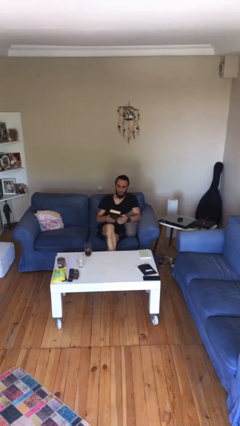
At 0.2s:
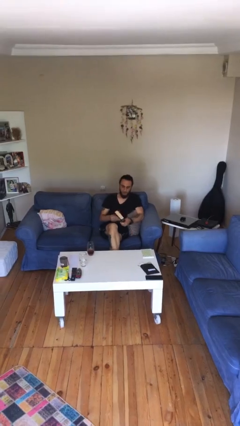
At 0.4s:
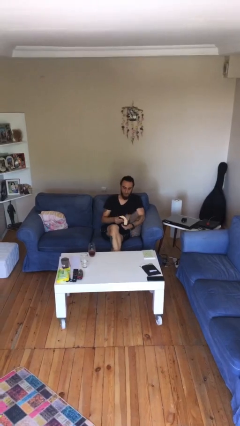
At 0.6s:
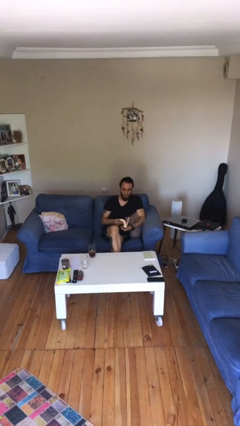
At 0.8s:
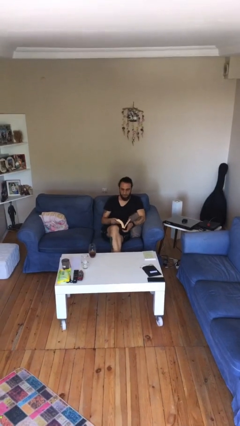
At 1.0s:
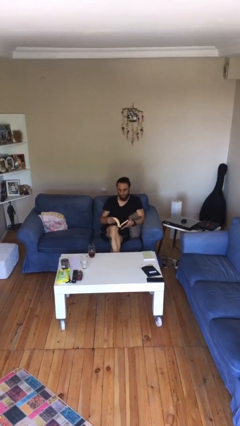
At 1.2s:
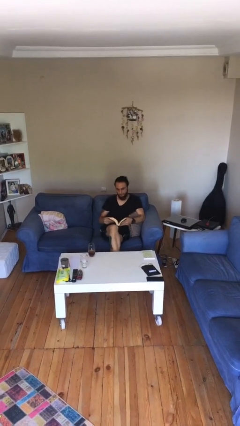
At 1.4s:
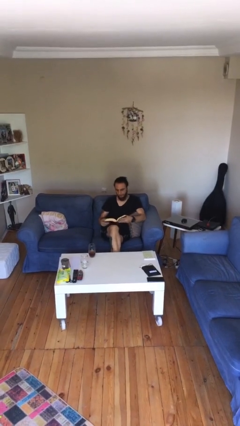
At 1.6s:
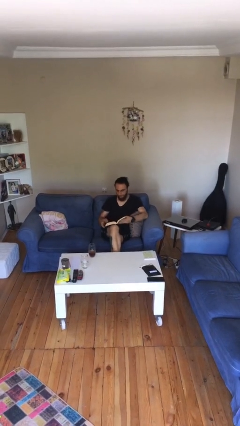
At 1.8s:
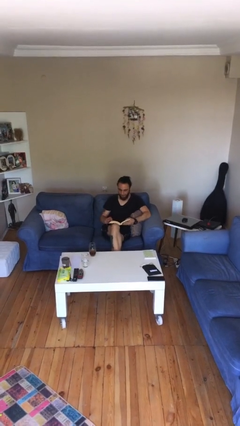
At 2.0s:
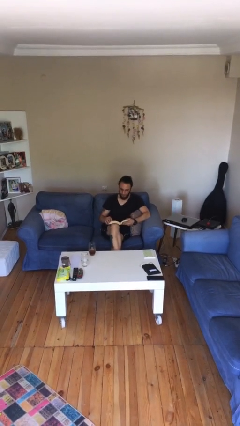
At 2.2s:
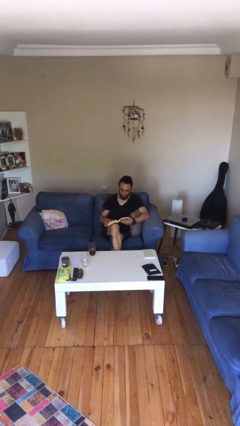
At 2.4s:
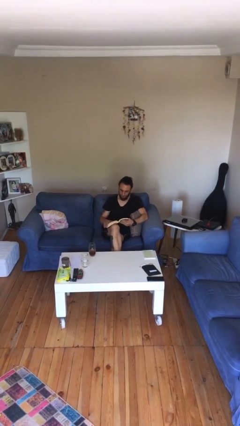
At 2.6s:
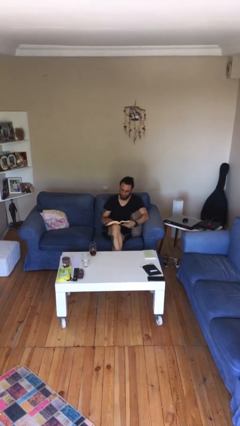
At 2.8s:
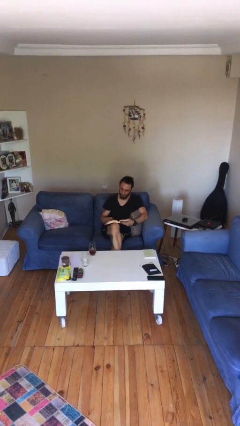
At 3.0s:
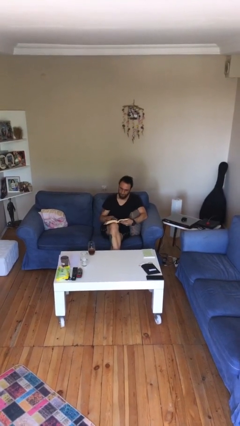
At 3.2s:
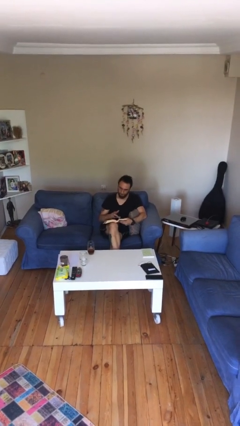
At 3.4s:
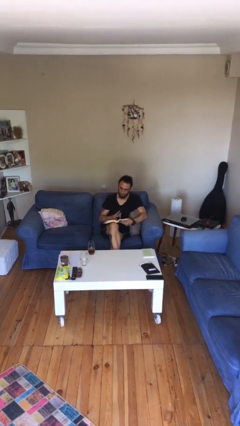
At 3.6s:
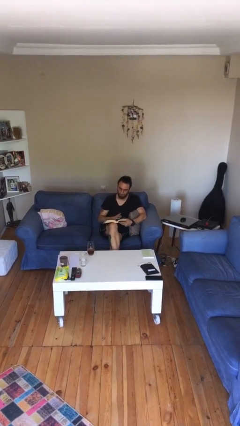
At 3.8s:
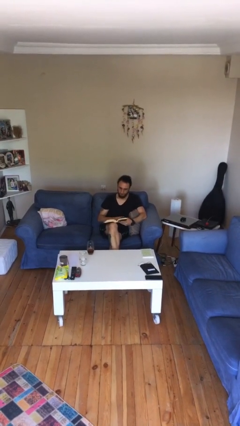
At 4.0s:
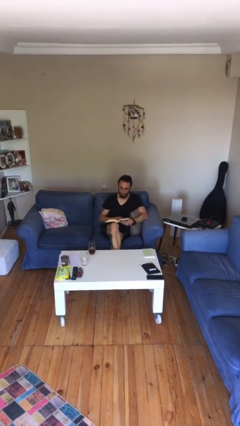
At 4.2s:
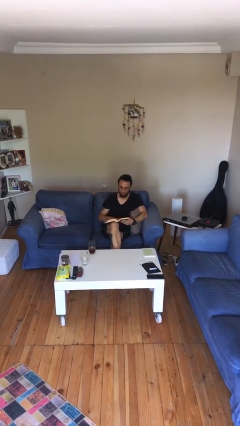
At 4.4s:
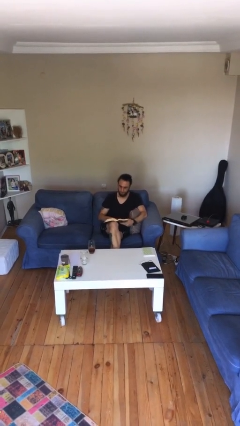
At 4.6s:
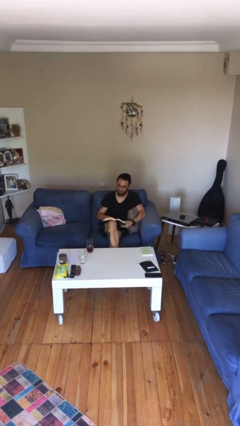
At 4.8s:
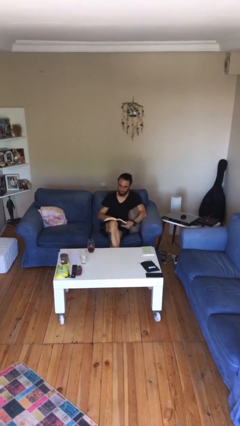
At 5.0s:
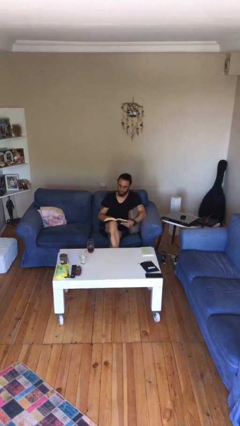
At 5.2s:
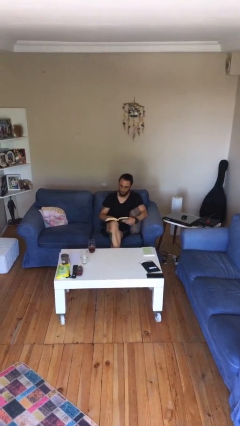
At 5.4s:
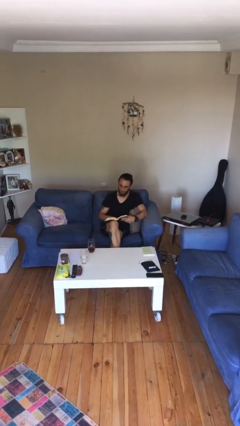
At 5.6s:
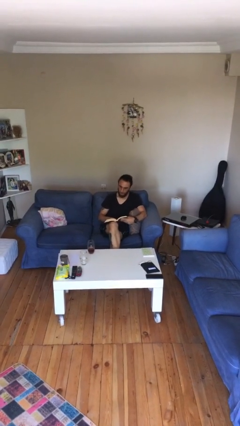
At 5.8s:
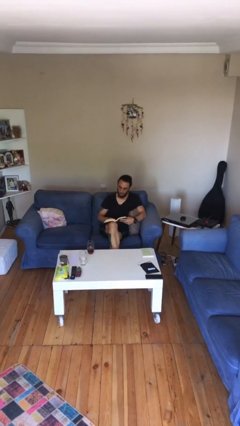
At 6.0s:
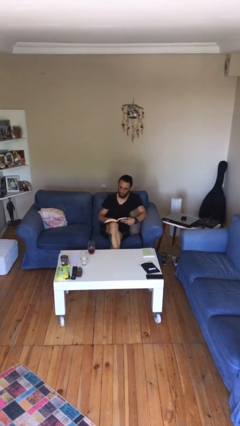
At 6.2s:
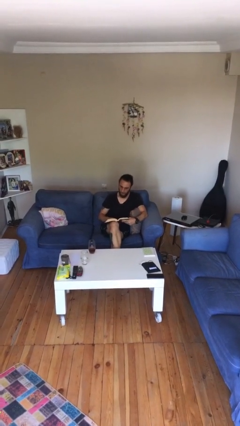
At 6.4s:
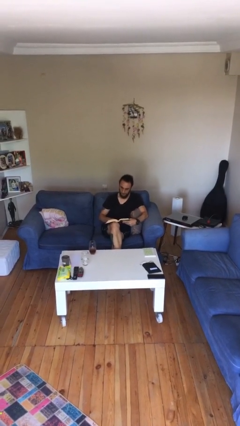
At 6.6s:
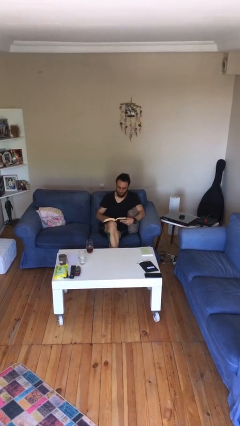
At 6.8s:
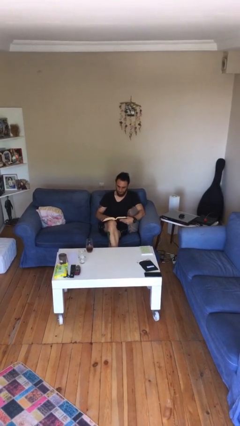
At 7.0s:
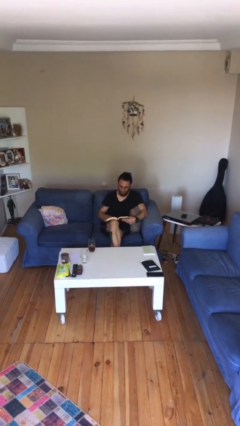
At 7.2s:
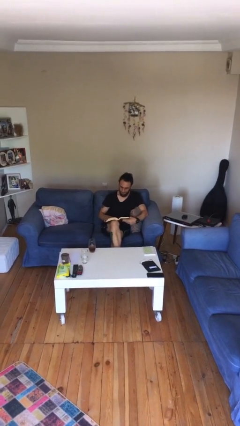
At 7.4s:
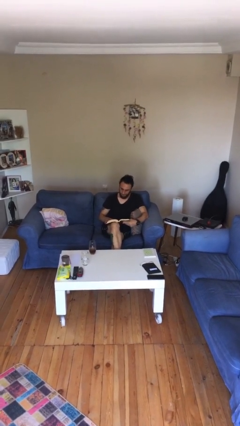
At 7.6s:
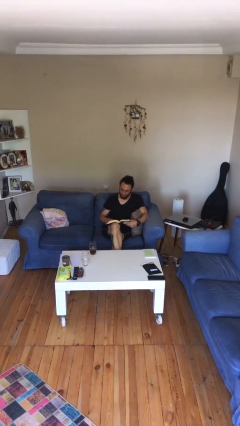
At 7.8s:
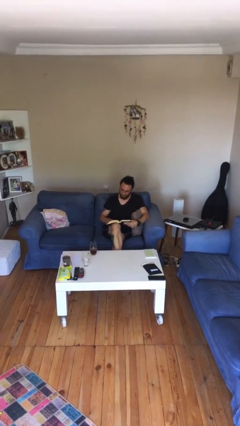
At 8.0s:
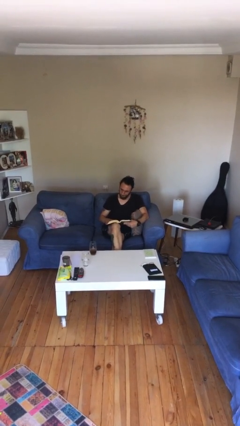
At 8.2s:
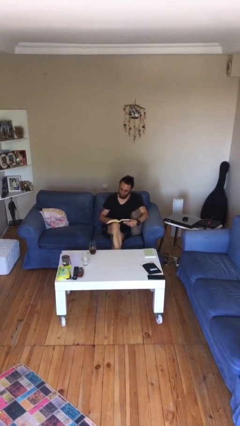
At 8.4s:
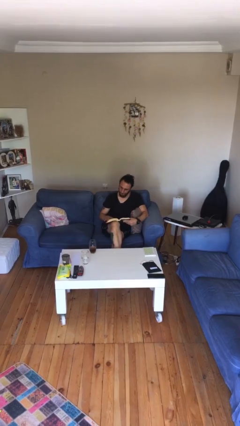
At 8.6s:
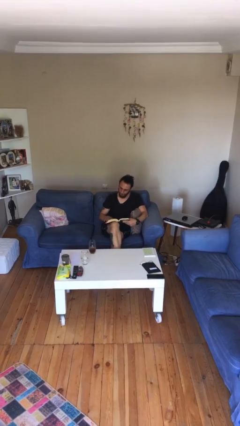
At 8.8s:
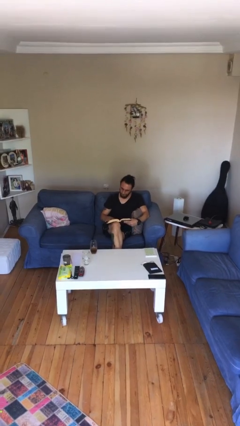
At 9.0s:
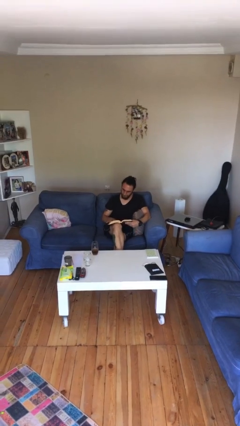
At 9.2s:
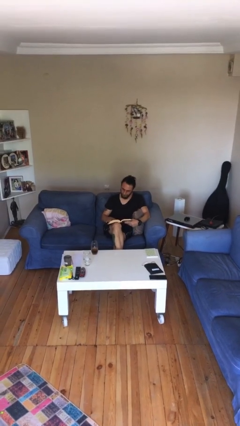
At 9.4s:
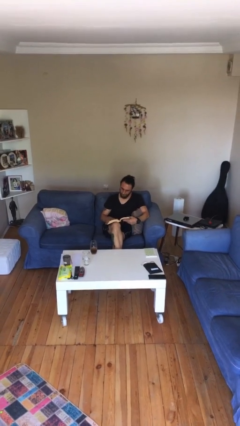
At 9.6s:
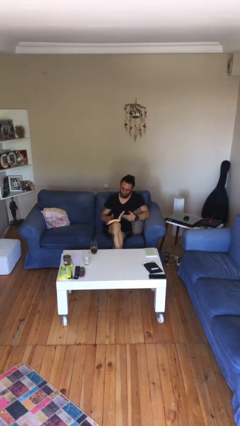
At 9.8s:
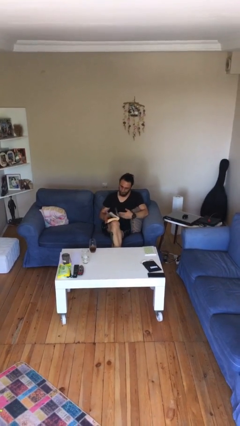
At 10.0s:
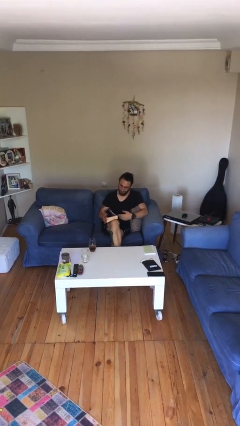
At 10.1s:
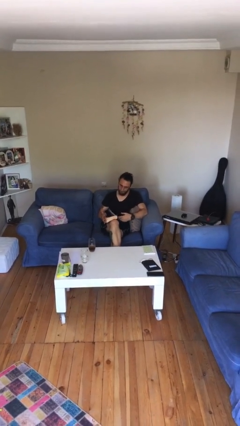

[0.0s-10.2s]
person reads document

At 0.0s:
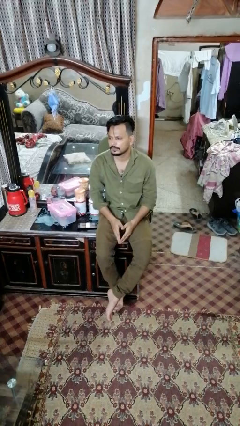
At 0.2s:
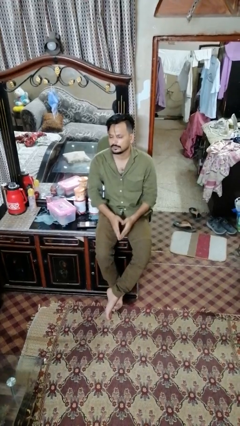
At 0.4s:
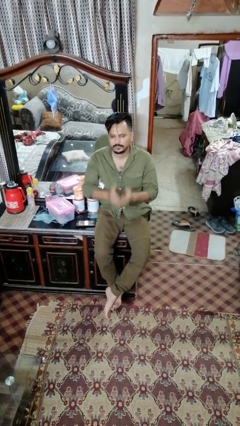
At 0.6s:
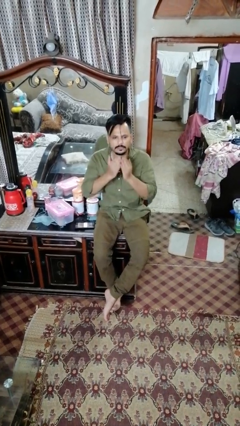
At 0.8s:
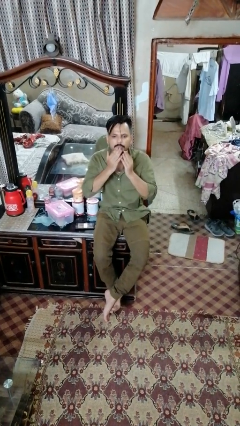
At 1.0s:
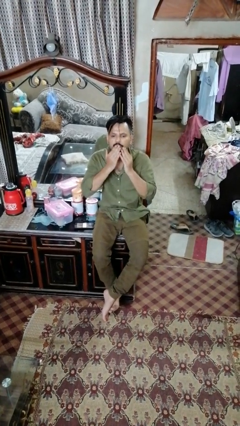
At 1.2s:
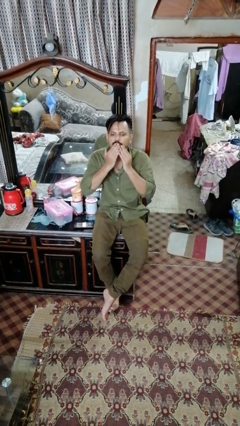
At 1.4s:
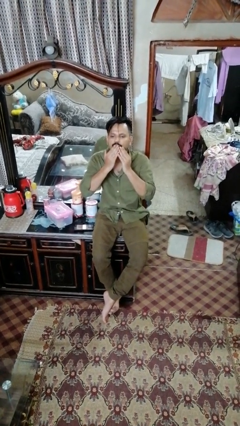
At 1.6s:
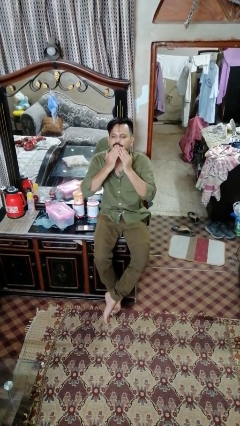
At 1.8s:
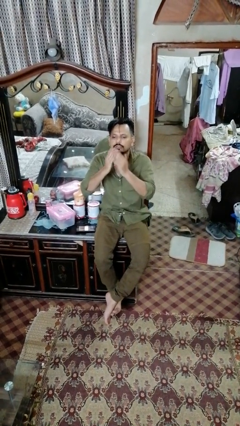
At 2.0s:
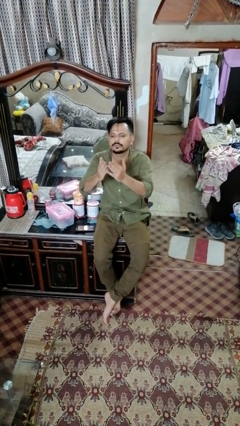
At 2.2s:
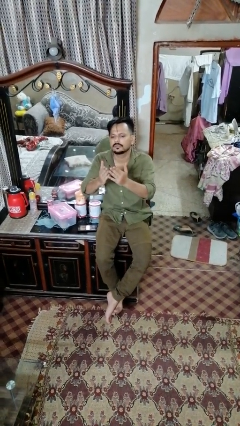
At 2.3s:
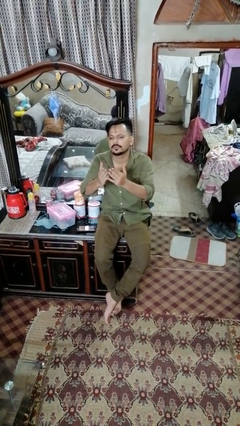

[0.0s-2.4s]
person gestures blow kiss

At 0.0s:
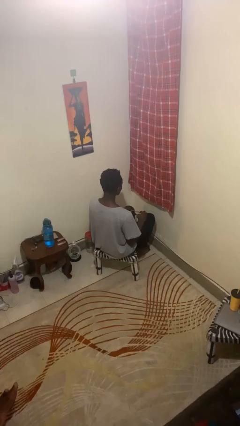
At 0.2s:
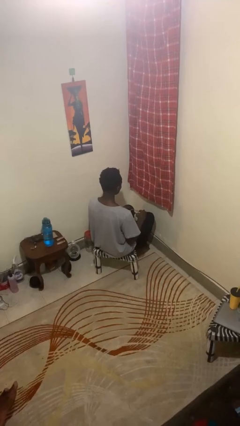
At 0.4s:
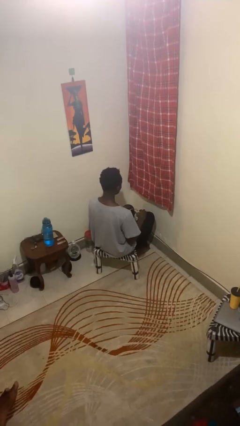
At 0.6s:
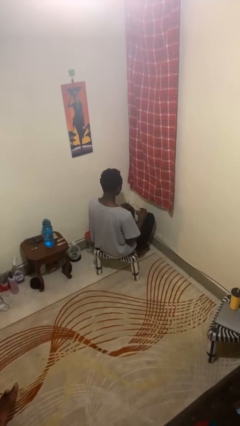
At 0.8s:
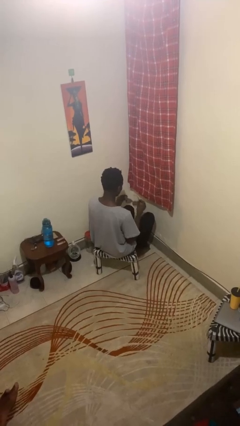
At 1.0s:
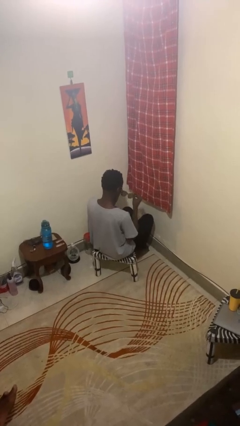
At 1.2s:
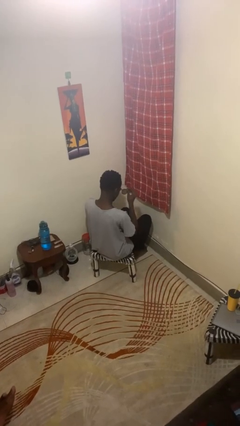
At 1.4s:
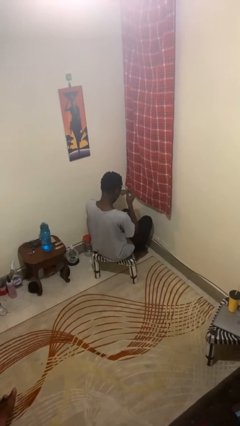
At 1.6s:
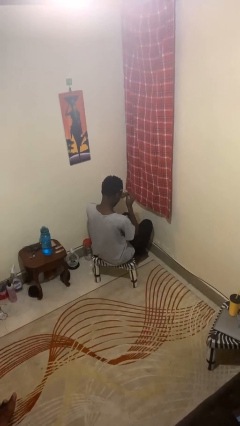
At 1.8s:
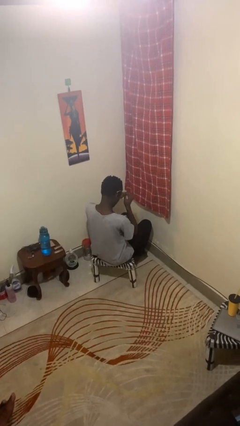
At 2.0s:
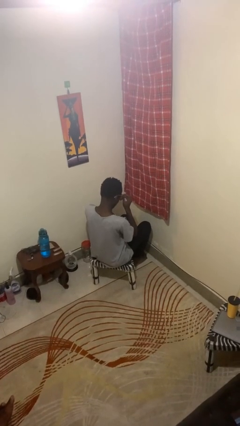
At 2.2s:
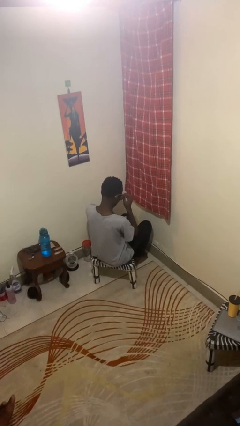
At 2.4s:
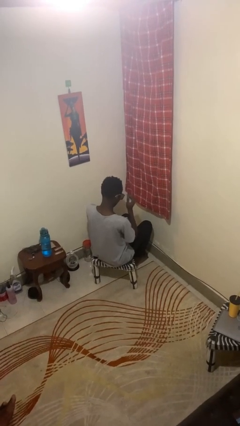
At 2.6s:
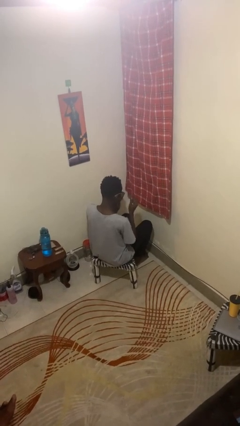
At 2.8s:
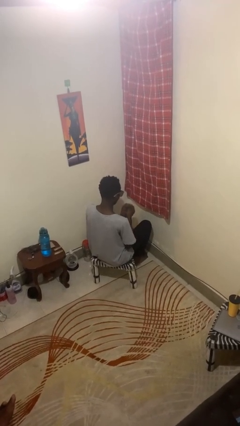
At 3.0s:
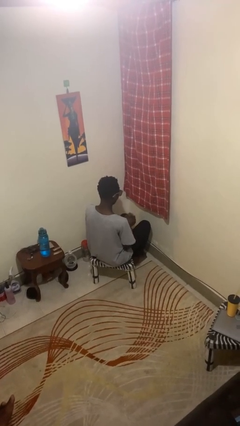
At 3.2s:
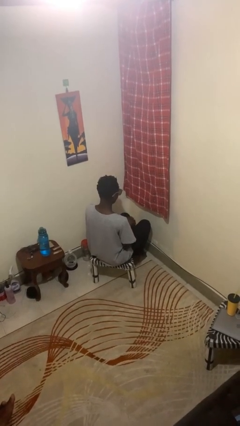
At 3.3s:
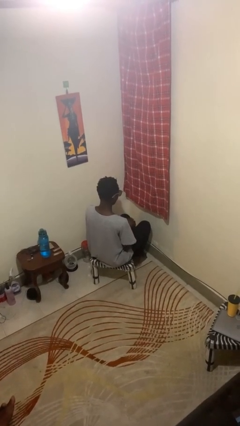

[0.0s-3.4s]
person puts on glasses

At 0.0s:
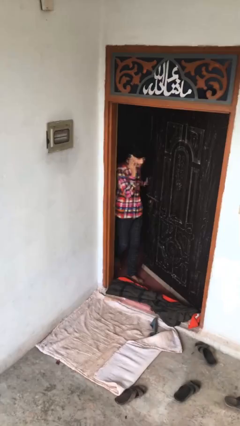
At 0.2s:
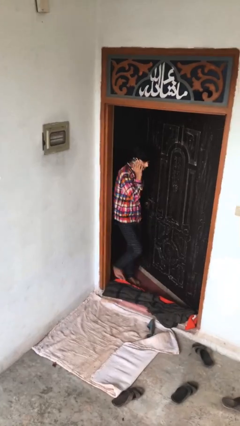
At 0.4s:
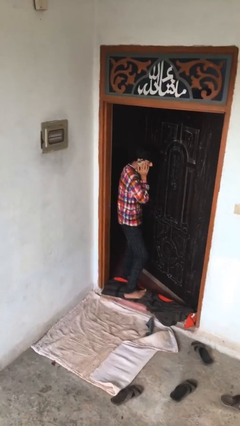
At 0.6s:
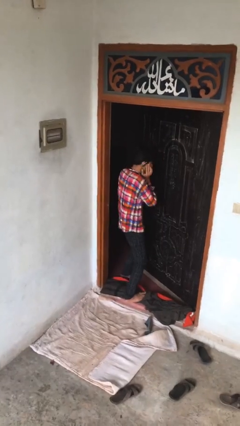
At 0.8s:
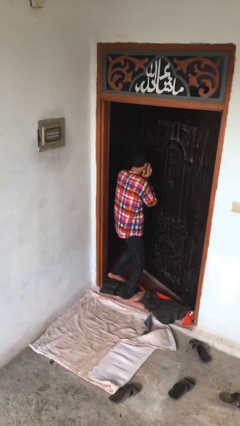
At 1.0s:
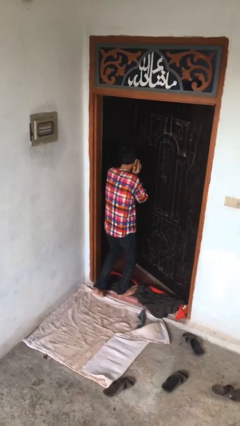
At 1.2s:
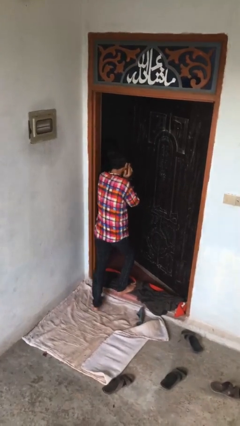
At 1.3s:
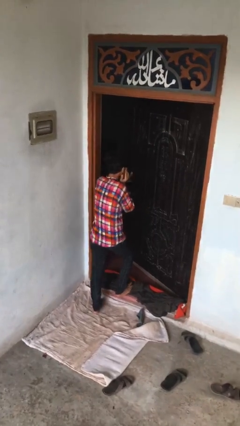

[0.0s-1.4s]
person enters scene through structure

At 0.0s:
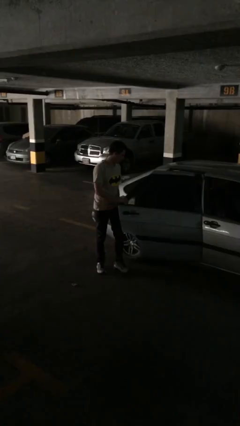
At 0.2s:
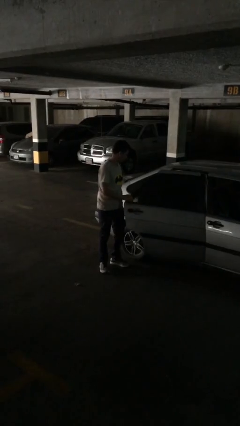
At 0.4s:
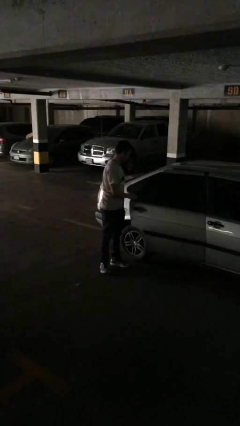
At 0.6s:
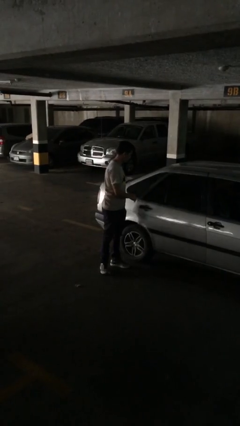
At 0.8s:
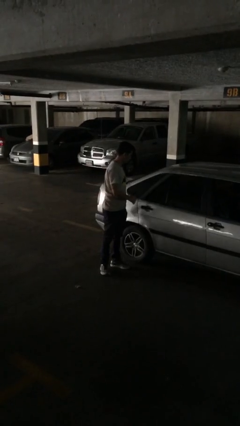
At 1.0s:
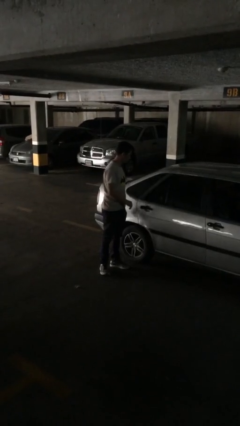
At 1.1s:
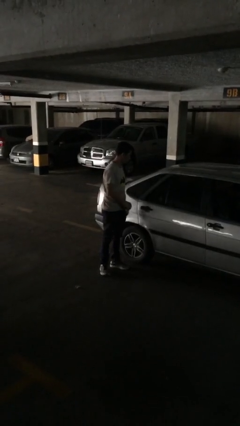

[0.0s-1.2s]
person closes car door
